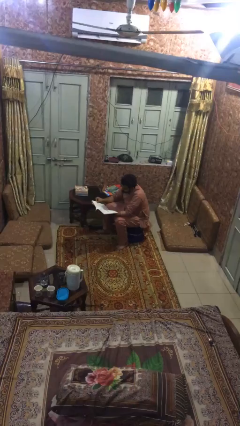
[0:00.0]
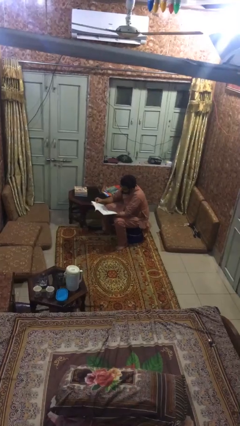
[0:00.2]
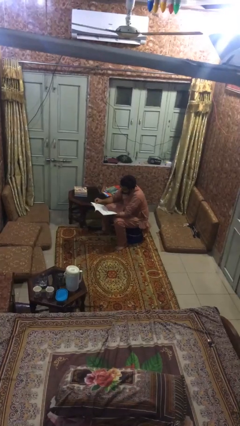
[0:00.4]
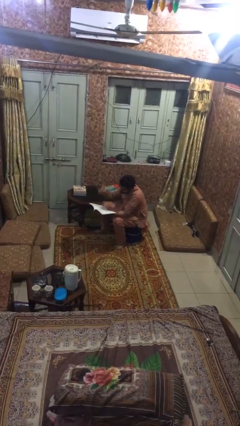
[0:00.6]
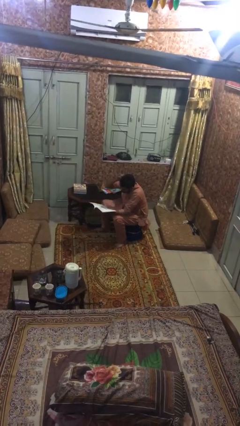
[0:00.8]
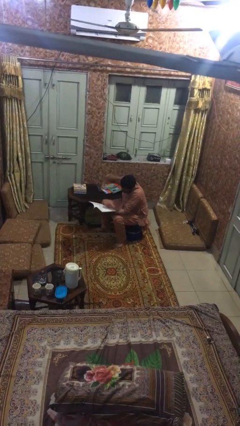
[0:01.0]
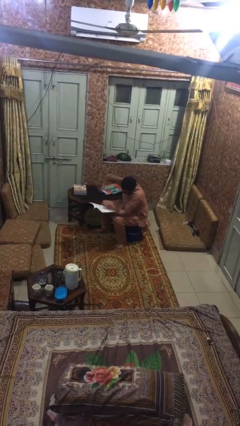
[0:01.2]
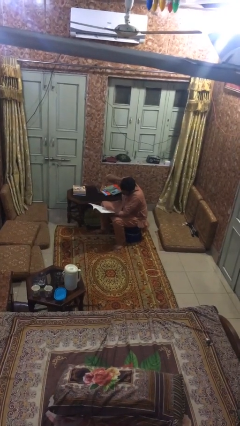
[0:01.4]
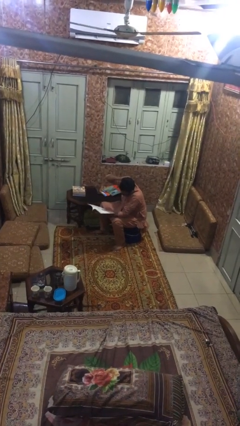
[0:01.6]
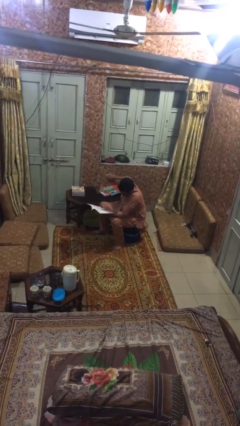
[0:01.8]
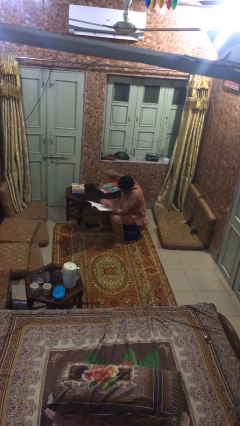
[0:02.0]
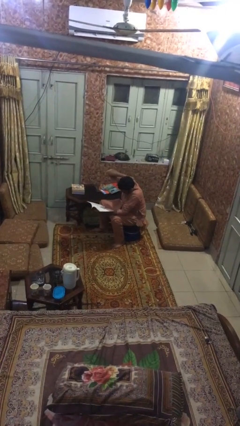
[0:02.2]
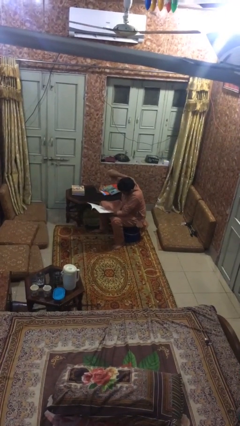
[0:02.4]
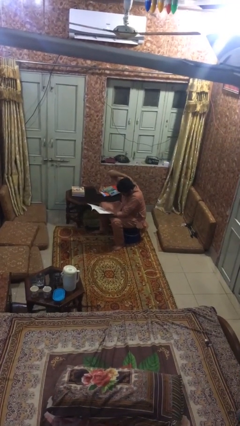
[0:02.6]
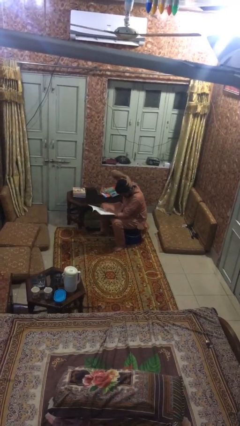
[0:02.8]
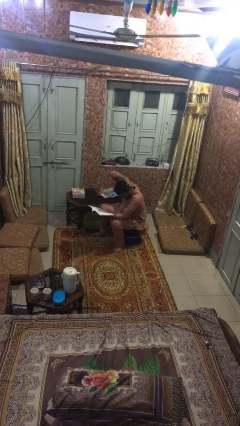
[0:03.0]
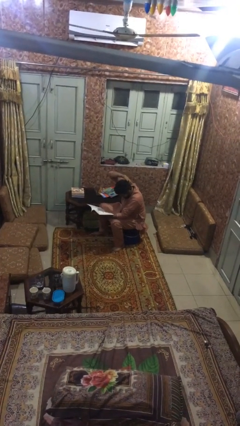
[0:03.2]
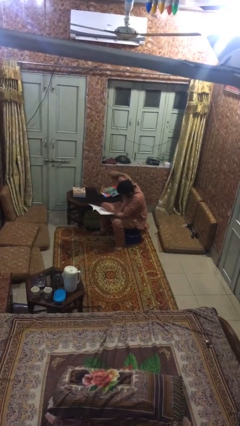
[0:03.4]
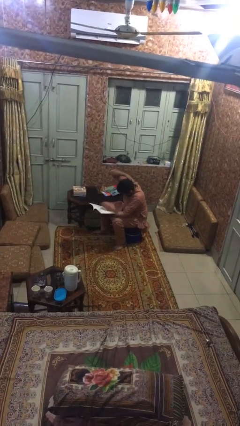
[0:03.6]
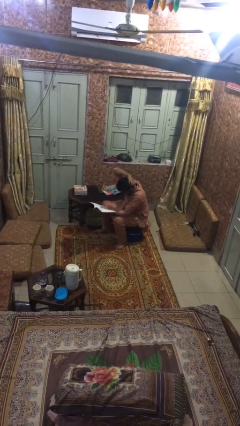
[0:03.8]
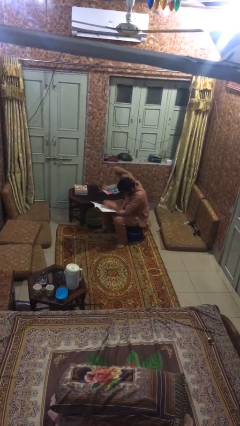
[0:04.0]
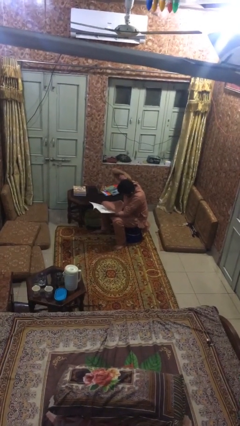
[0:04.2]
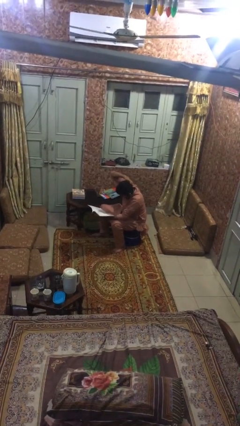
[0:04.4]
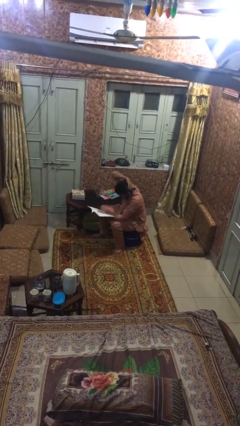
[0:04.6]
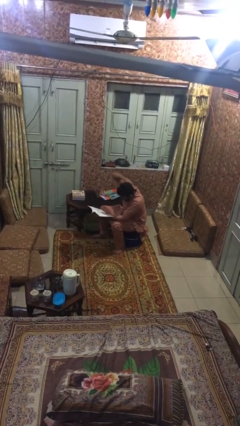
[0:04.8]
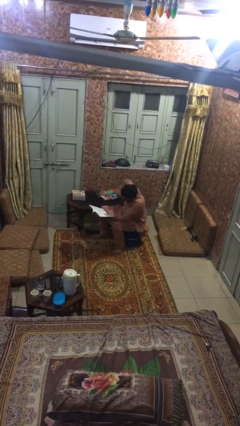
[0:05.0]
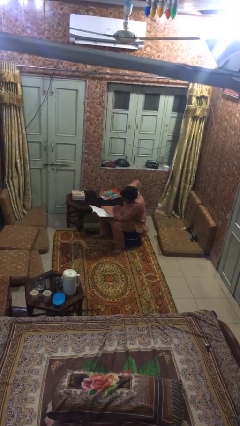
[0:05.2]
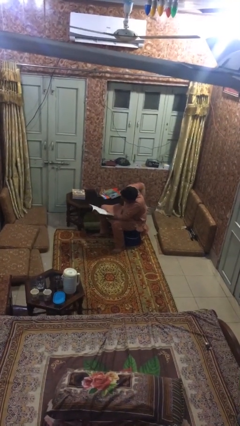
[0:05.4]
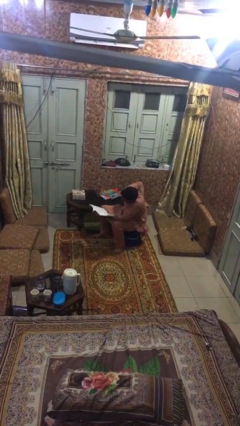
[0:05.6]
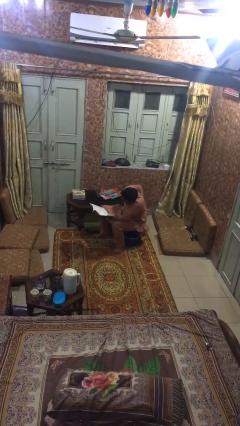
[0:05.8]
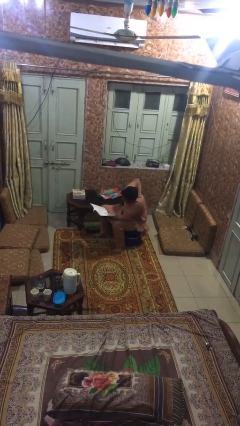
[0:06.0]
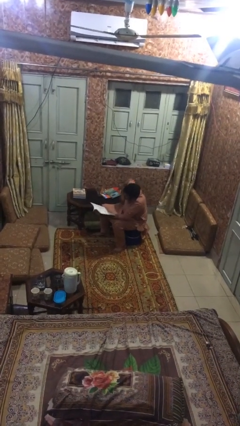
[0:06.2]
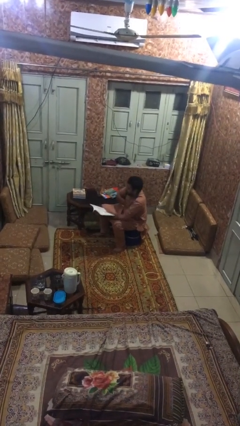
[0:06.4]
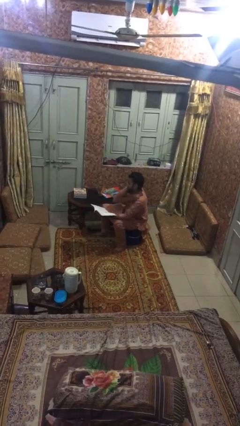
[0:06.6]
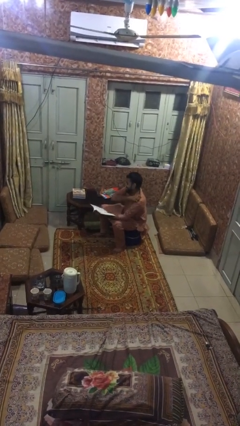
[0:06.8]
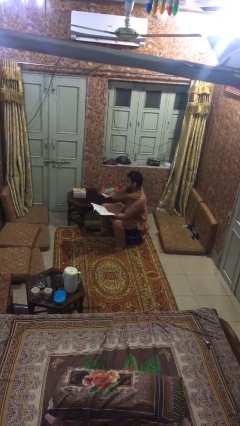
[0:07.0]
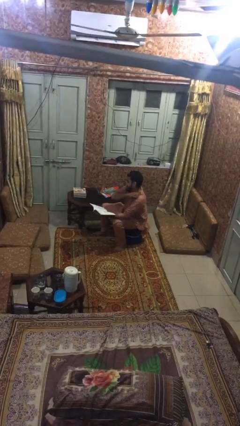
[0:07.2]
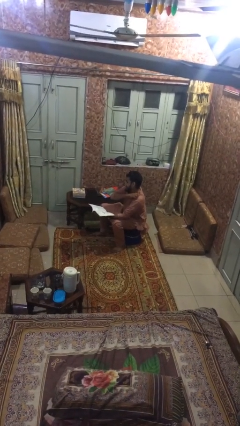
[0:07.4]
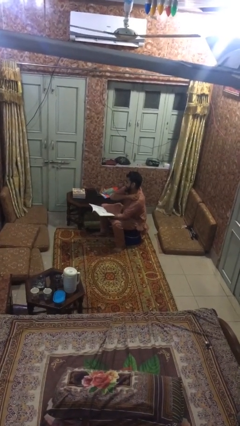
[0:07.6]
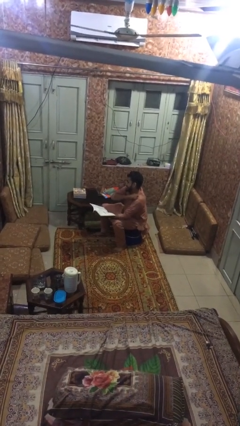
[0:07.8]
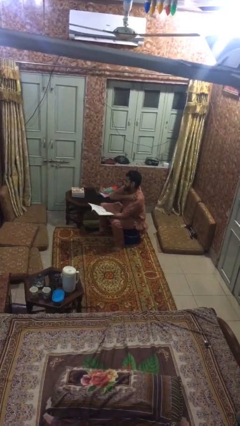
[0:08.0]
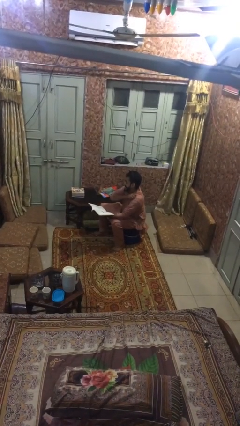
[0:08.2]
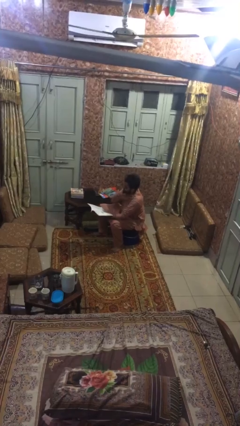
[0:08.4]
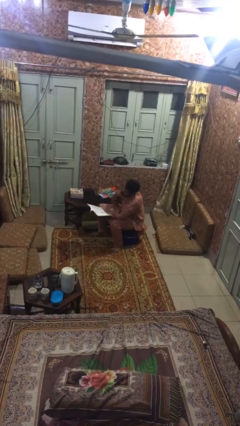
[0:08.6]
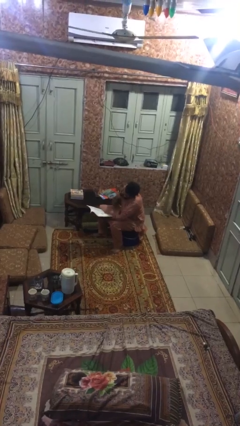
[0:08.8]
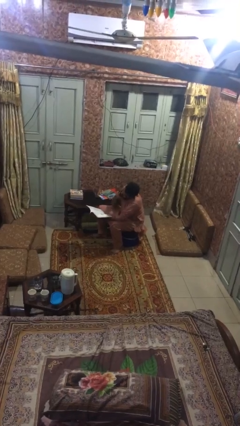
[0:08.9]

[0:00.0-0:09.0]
person reads document

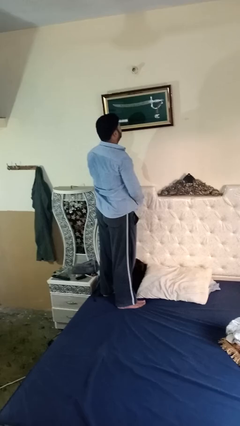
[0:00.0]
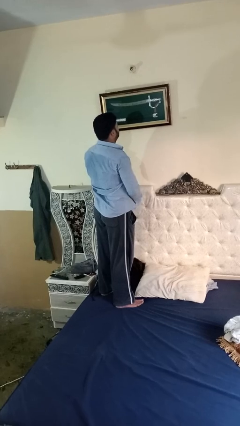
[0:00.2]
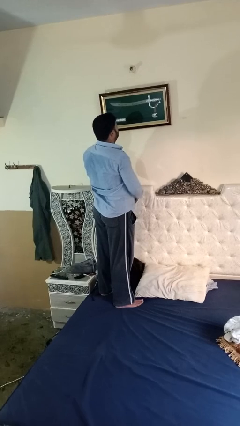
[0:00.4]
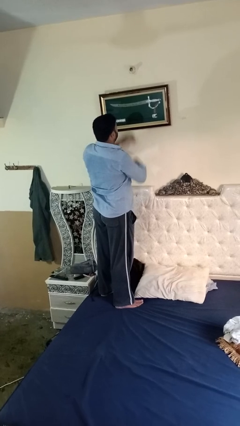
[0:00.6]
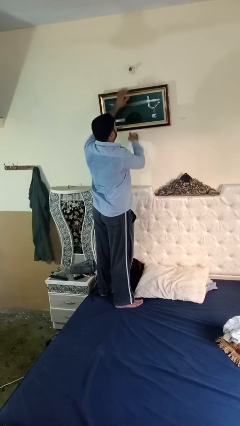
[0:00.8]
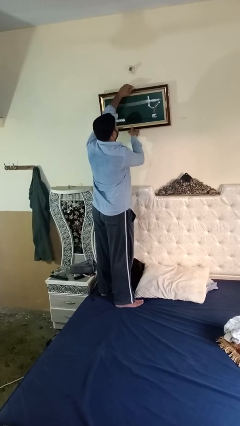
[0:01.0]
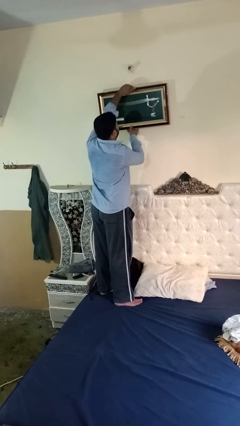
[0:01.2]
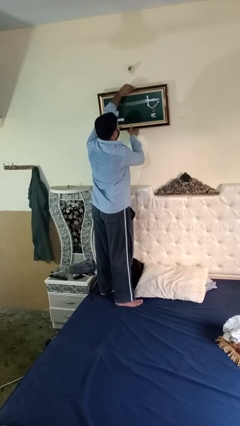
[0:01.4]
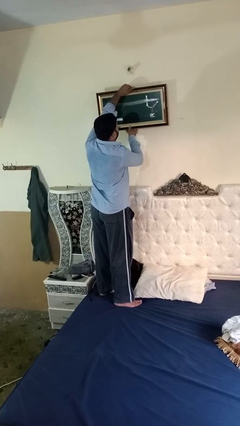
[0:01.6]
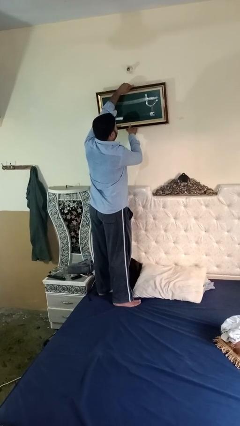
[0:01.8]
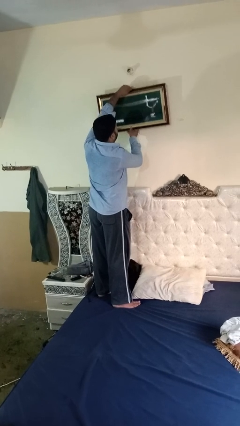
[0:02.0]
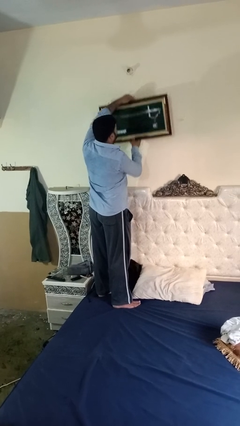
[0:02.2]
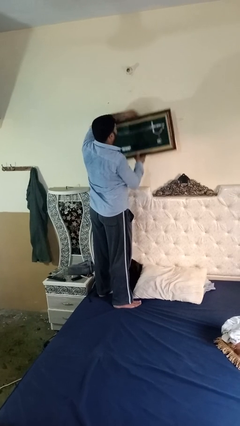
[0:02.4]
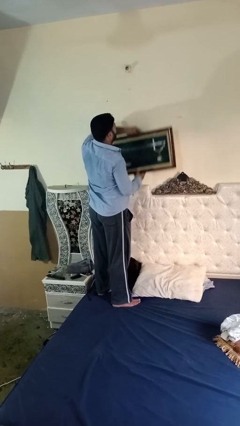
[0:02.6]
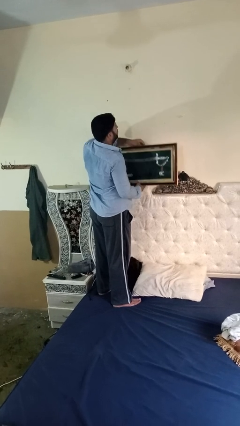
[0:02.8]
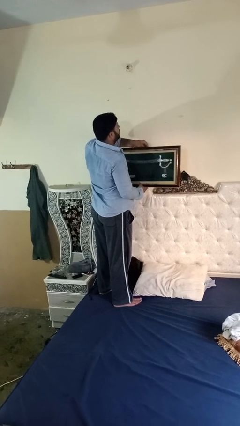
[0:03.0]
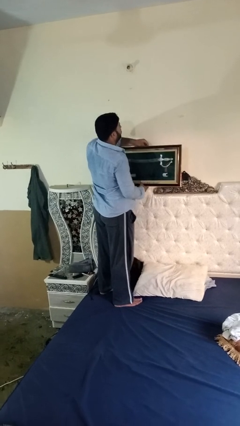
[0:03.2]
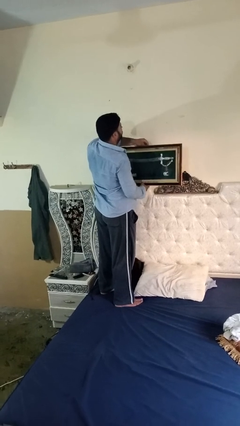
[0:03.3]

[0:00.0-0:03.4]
person takes down picture frame

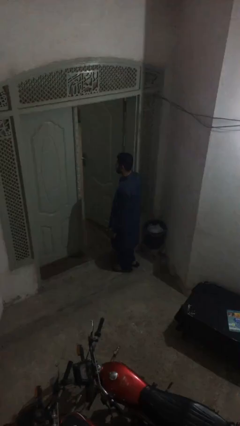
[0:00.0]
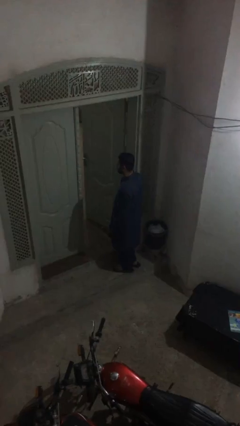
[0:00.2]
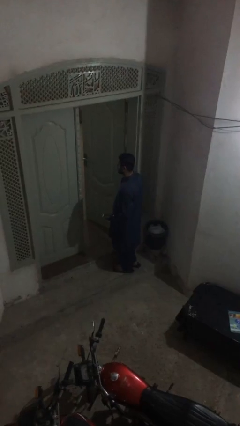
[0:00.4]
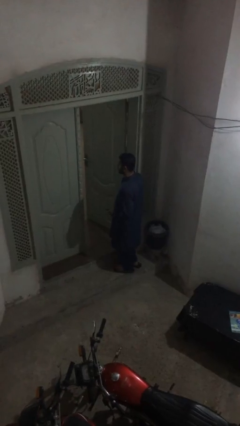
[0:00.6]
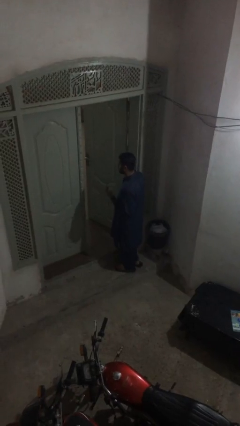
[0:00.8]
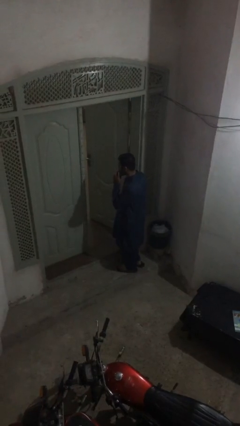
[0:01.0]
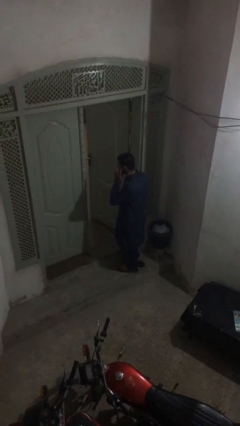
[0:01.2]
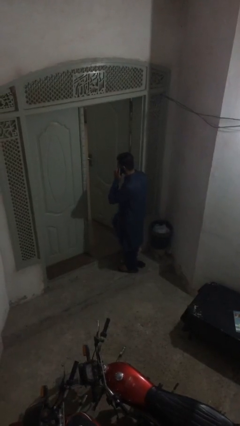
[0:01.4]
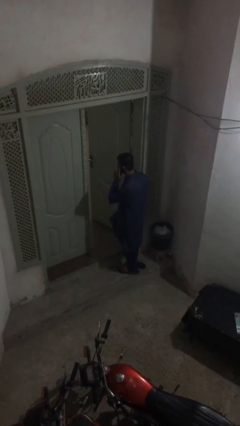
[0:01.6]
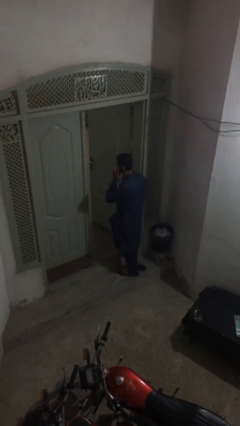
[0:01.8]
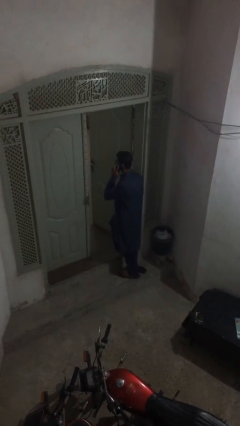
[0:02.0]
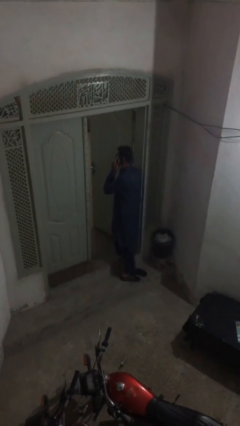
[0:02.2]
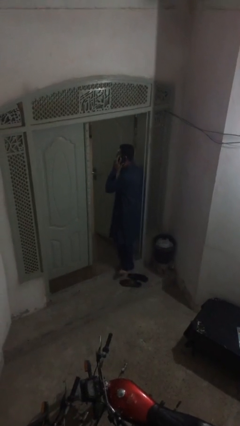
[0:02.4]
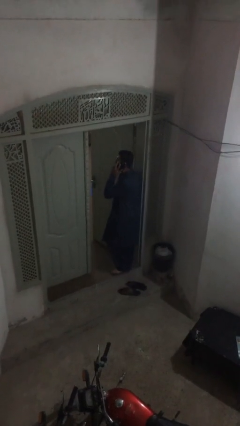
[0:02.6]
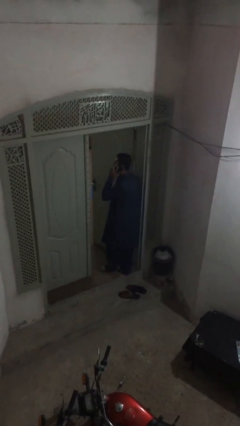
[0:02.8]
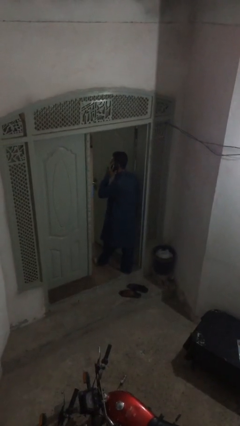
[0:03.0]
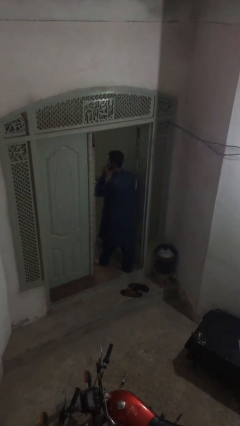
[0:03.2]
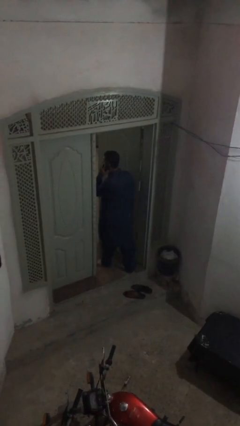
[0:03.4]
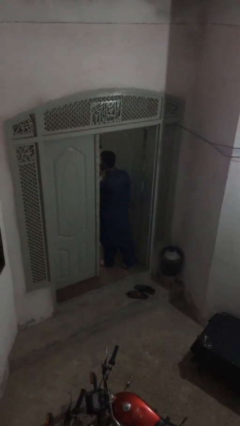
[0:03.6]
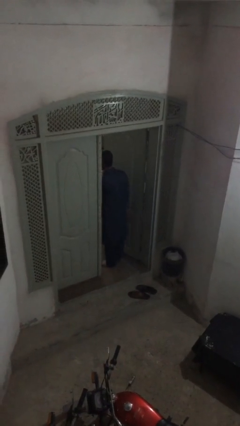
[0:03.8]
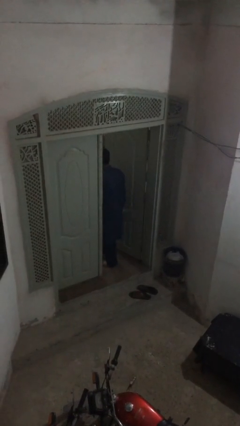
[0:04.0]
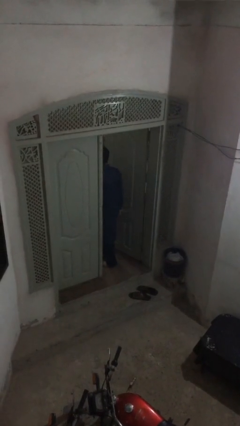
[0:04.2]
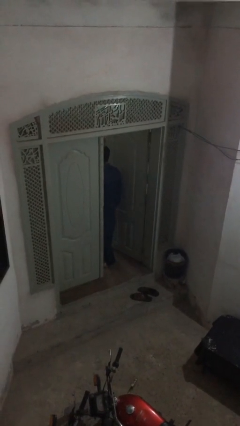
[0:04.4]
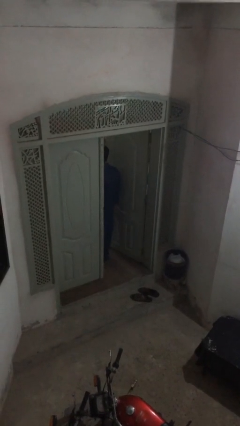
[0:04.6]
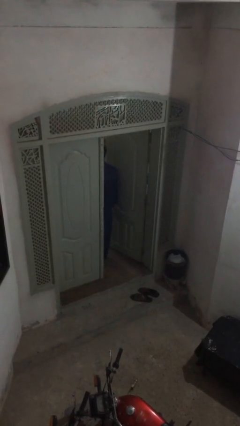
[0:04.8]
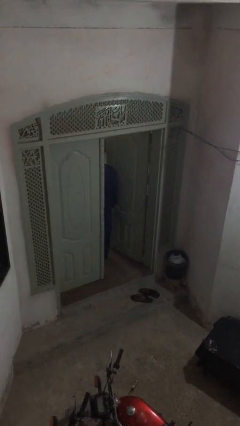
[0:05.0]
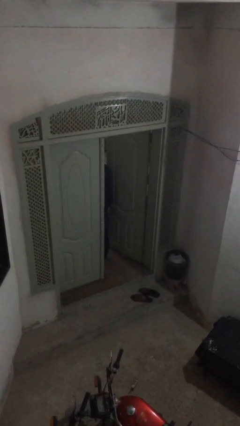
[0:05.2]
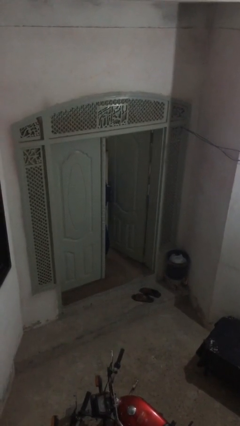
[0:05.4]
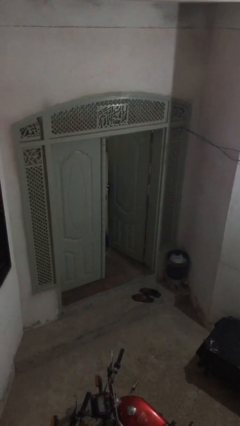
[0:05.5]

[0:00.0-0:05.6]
person exits scene through structure
